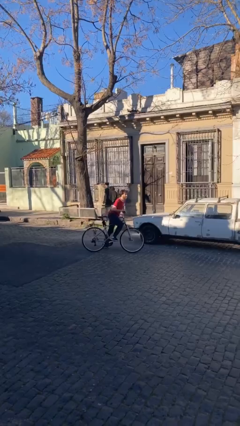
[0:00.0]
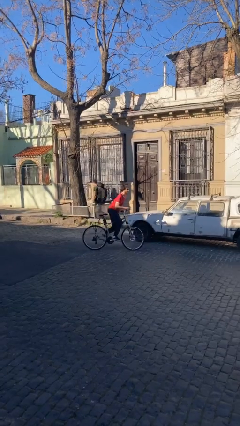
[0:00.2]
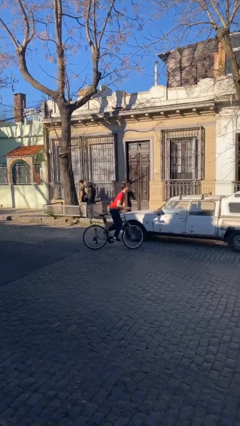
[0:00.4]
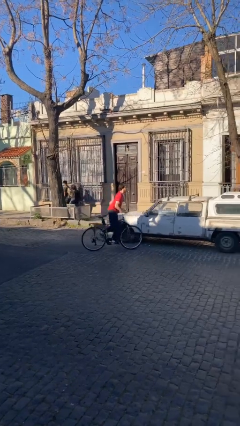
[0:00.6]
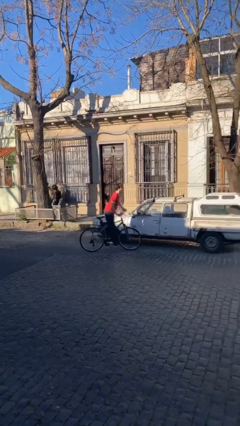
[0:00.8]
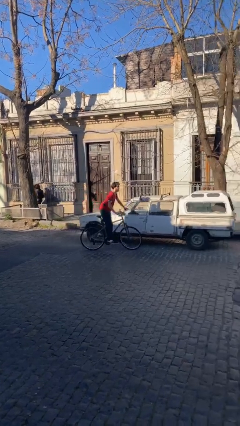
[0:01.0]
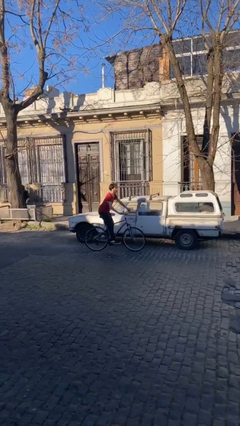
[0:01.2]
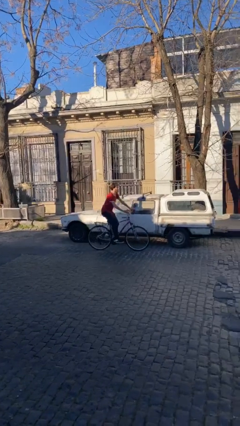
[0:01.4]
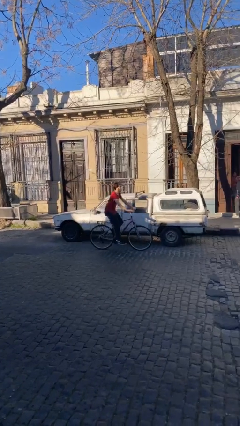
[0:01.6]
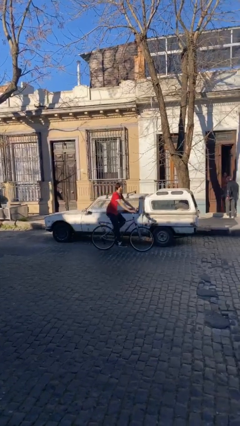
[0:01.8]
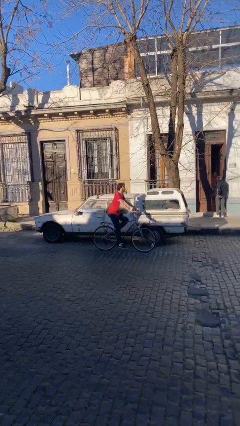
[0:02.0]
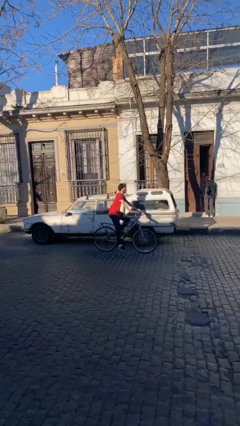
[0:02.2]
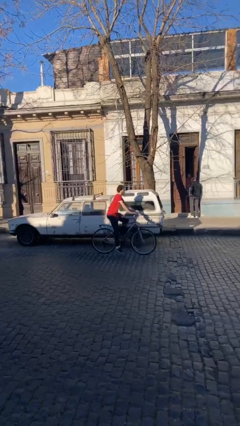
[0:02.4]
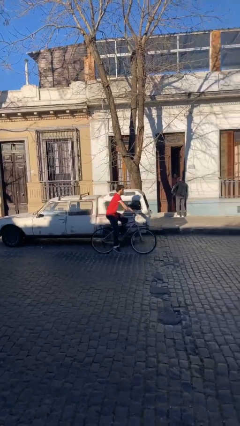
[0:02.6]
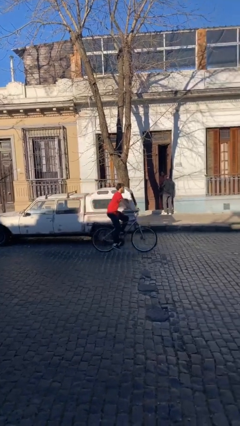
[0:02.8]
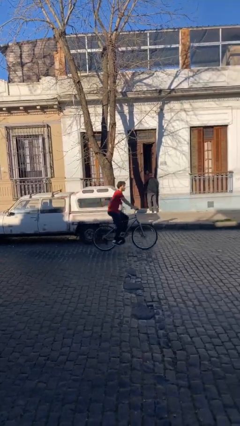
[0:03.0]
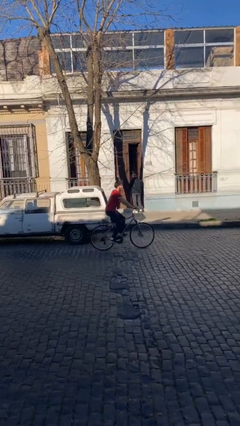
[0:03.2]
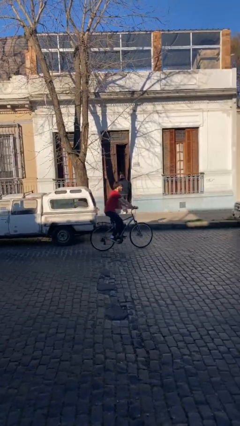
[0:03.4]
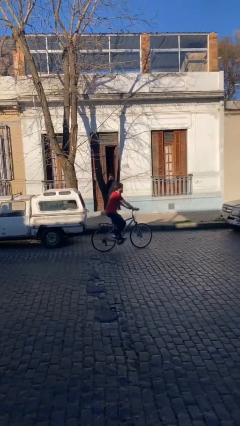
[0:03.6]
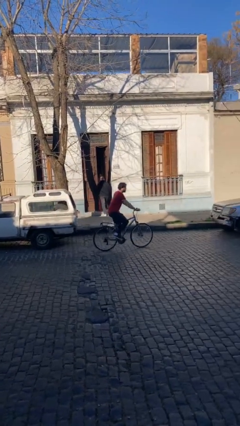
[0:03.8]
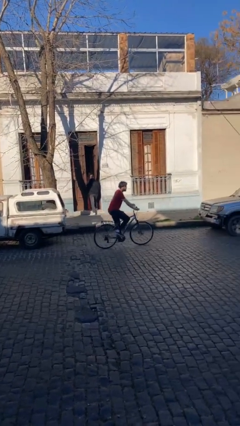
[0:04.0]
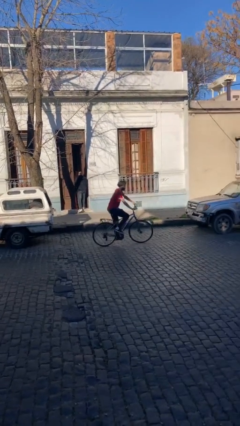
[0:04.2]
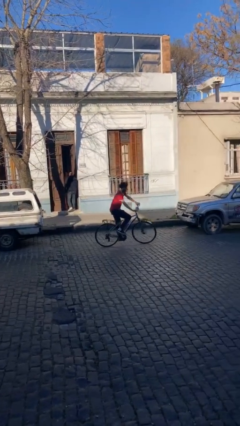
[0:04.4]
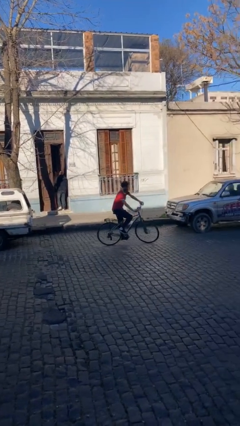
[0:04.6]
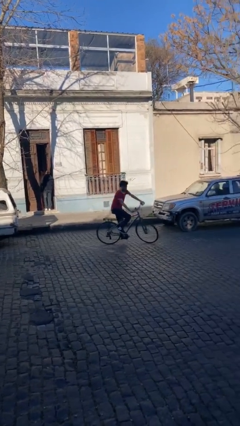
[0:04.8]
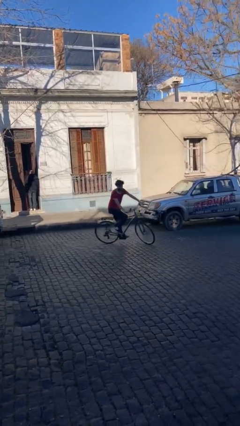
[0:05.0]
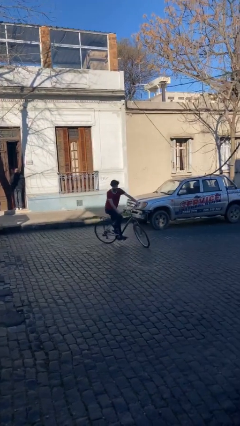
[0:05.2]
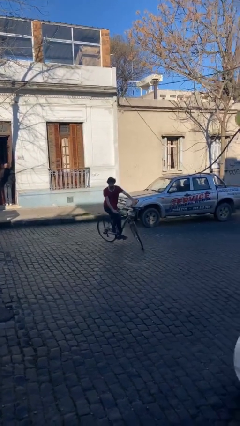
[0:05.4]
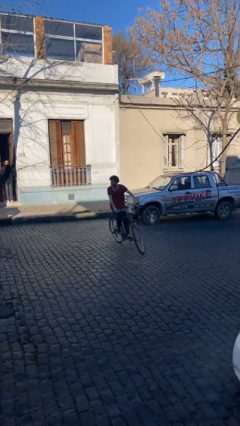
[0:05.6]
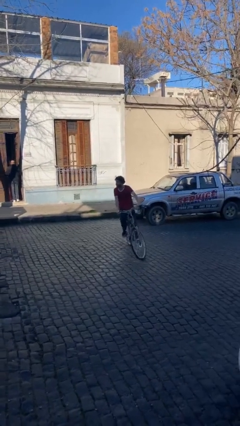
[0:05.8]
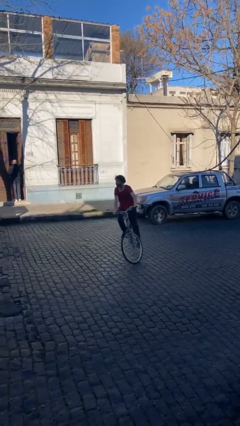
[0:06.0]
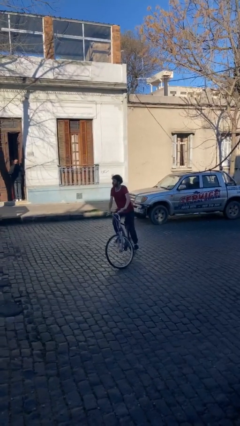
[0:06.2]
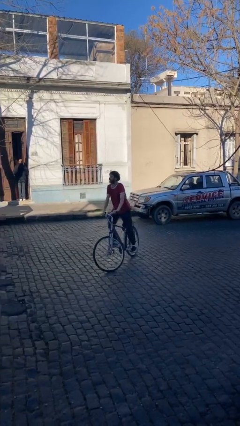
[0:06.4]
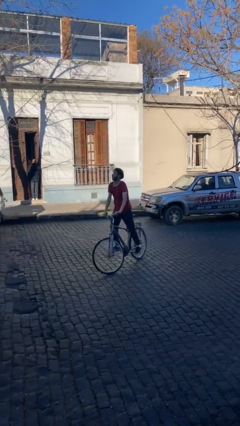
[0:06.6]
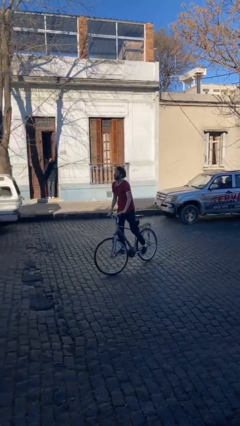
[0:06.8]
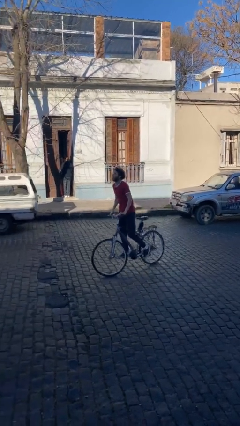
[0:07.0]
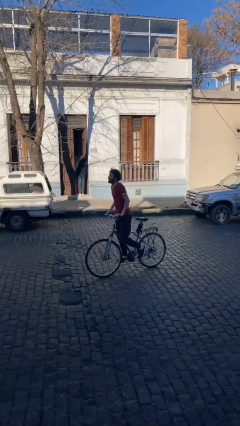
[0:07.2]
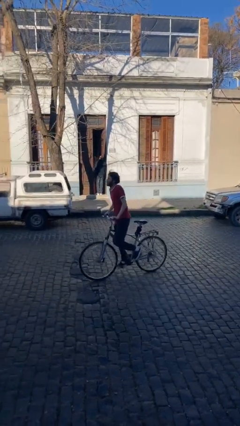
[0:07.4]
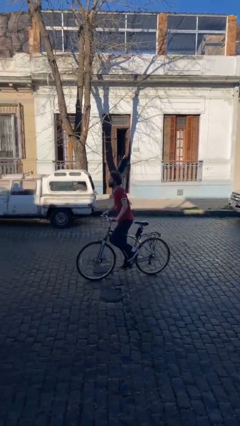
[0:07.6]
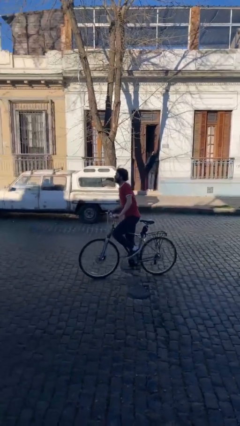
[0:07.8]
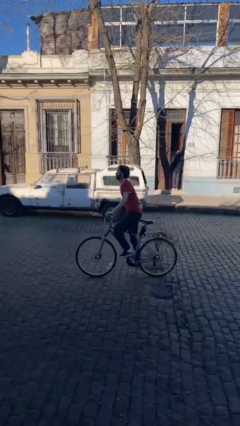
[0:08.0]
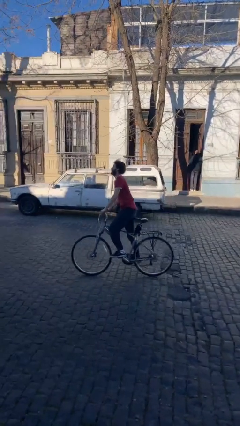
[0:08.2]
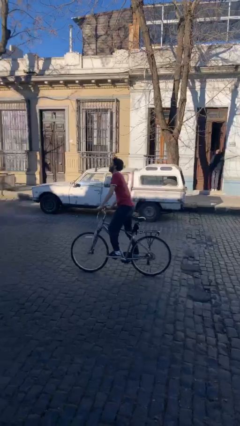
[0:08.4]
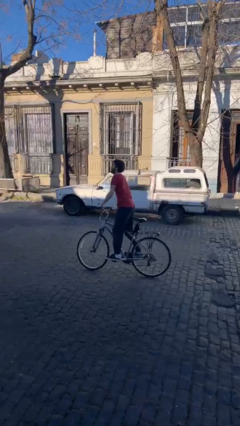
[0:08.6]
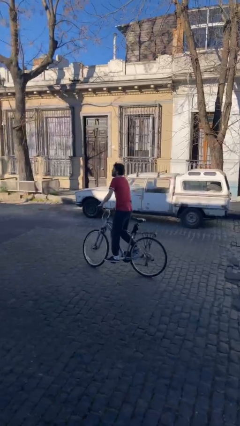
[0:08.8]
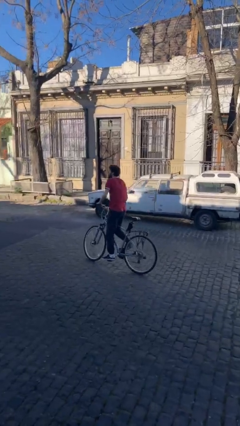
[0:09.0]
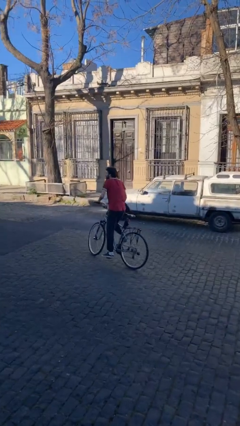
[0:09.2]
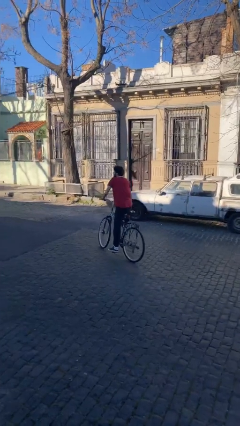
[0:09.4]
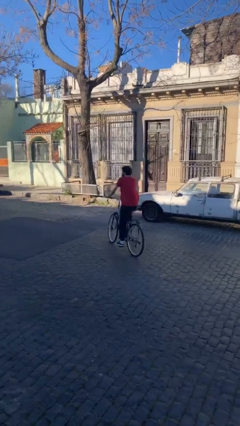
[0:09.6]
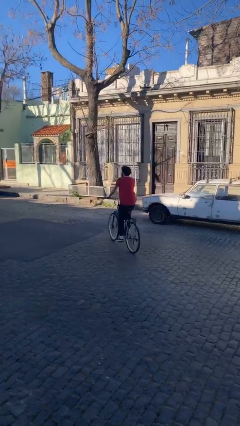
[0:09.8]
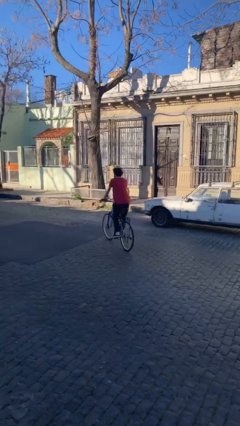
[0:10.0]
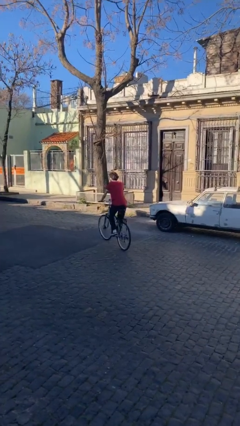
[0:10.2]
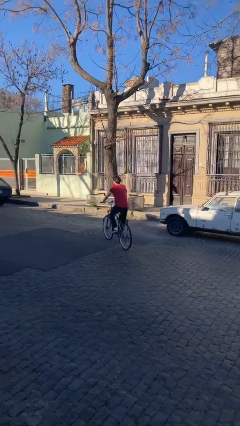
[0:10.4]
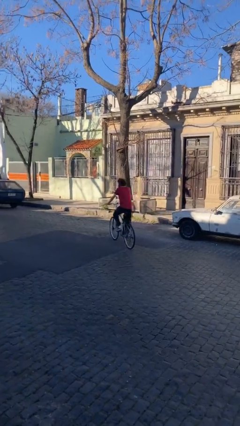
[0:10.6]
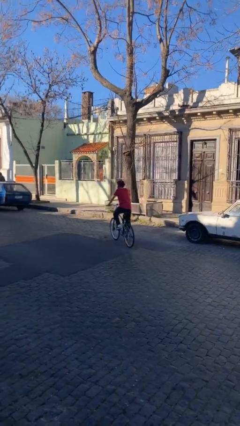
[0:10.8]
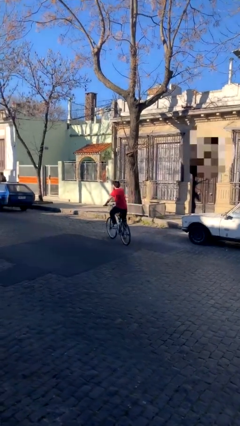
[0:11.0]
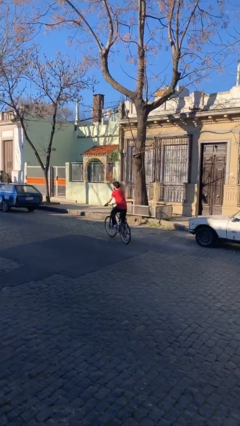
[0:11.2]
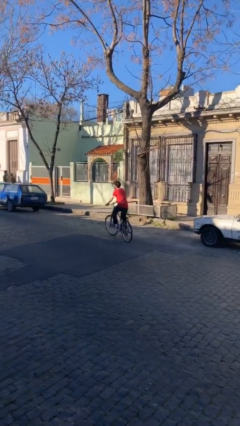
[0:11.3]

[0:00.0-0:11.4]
person rides bicycle

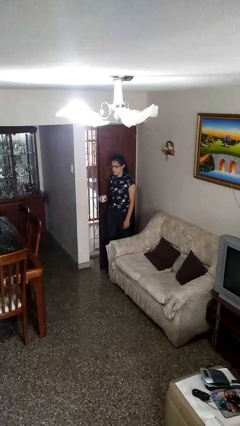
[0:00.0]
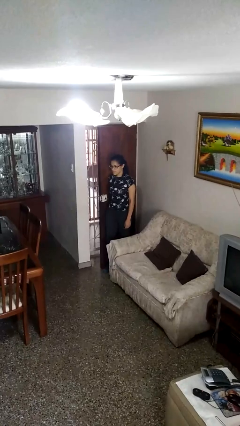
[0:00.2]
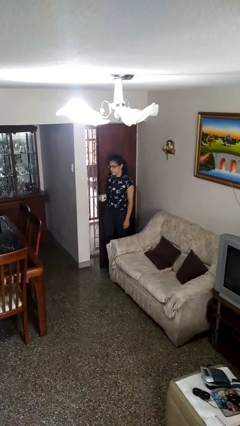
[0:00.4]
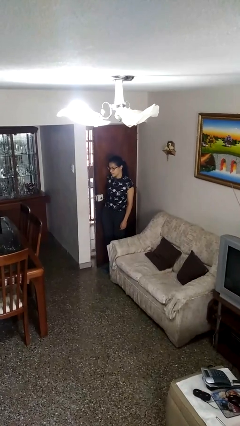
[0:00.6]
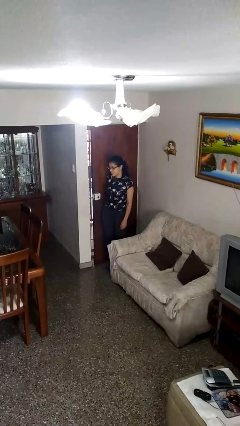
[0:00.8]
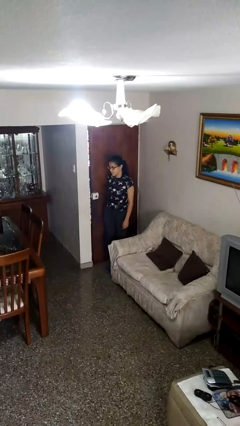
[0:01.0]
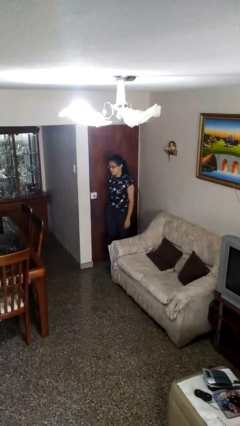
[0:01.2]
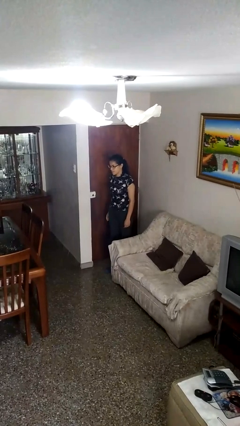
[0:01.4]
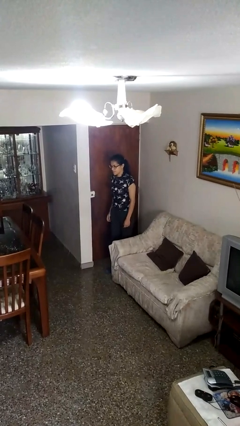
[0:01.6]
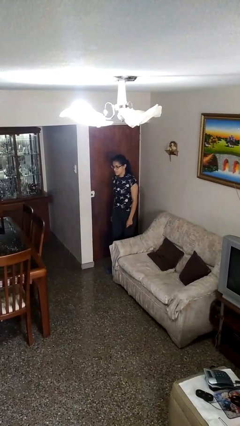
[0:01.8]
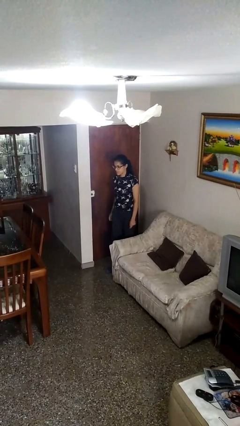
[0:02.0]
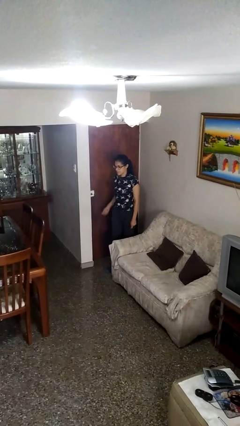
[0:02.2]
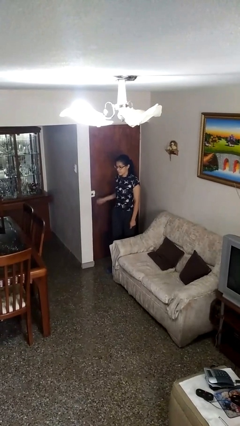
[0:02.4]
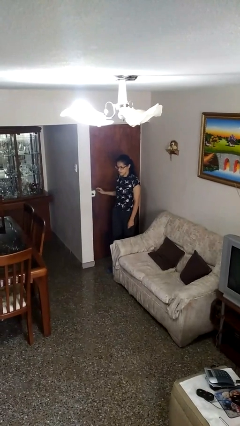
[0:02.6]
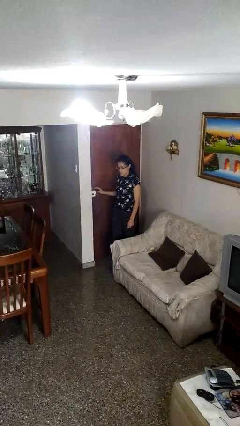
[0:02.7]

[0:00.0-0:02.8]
person closes door with hip

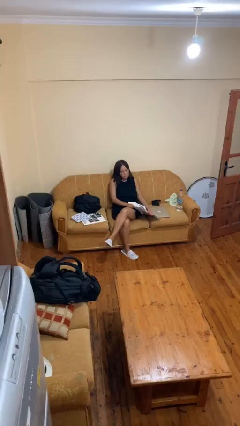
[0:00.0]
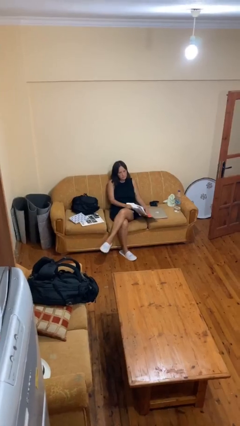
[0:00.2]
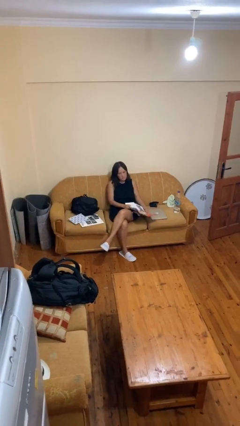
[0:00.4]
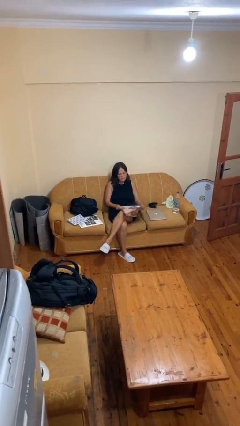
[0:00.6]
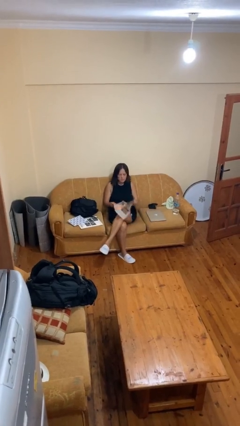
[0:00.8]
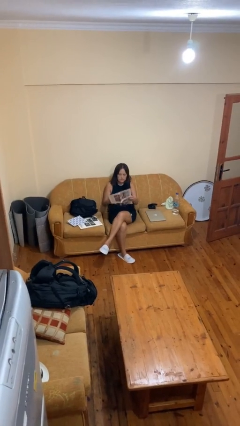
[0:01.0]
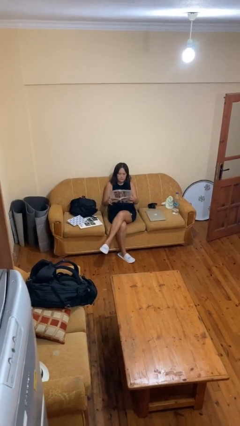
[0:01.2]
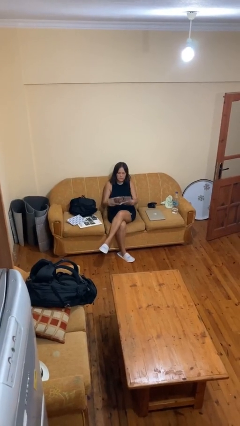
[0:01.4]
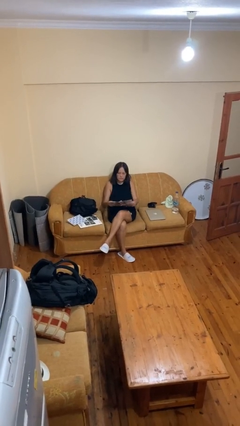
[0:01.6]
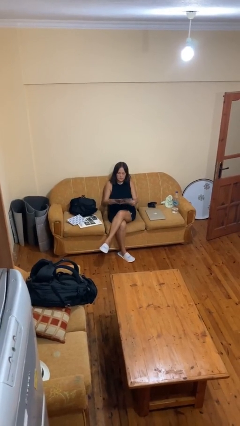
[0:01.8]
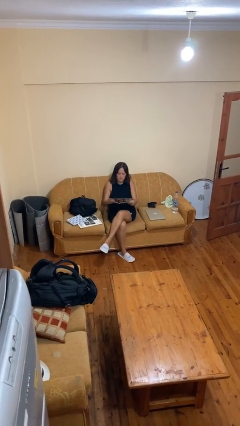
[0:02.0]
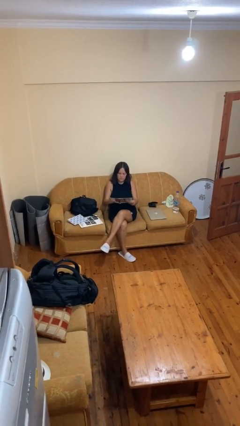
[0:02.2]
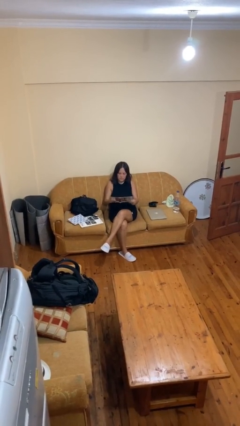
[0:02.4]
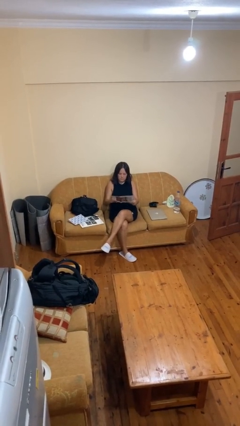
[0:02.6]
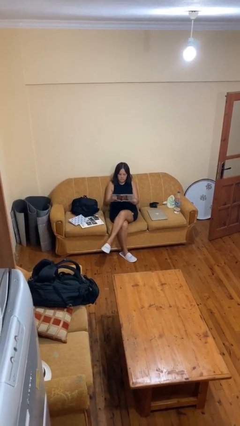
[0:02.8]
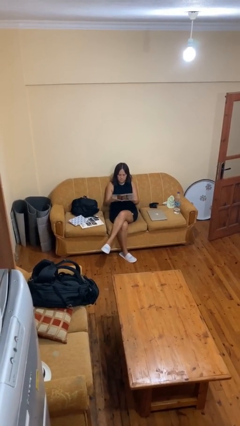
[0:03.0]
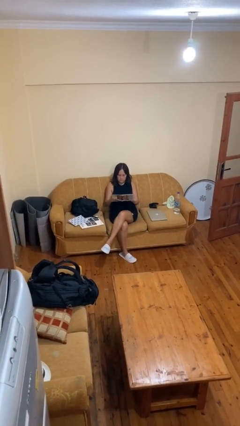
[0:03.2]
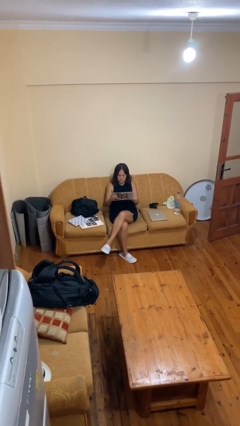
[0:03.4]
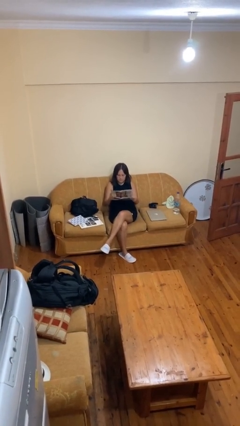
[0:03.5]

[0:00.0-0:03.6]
person reads newspaper
